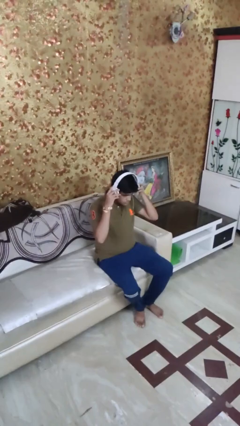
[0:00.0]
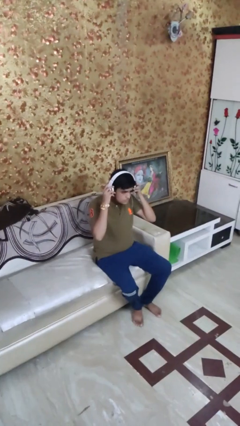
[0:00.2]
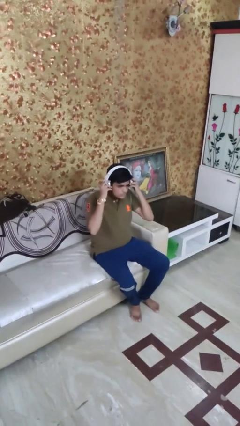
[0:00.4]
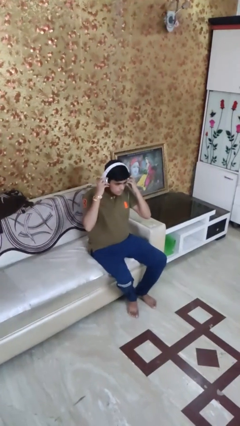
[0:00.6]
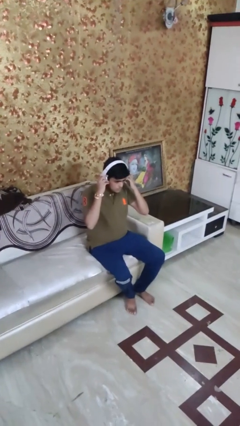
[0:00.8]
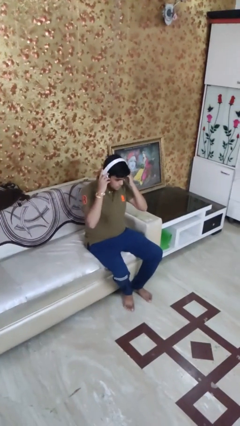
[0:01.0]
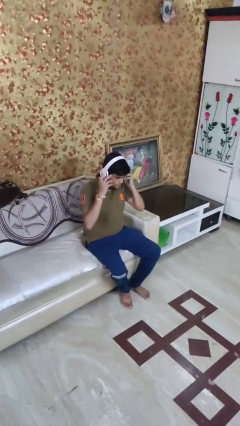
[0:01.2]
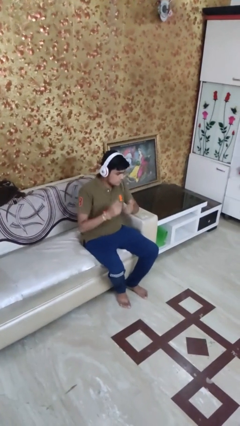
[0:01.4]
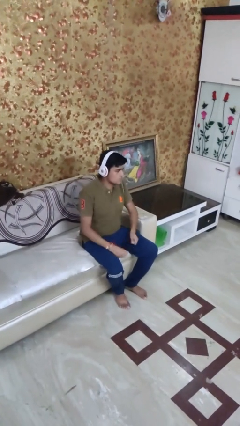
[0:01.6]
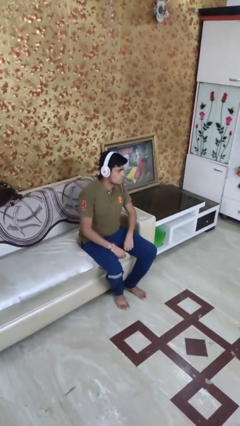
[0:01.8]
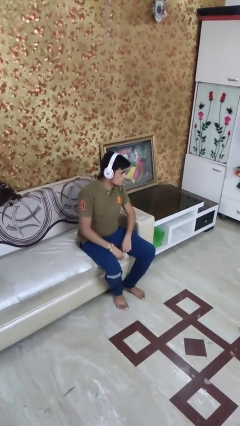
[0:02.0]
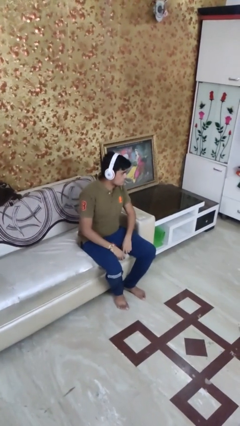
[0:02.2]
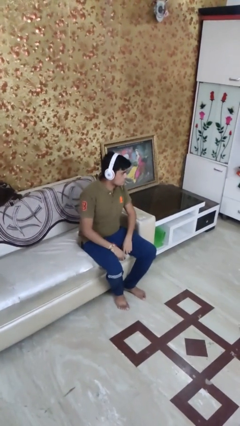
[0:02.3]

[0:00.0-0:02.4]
person puts on headphones

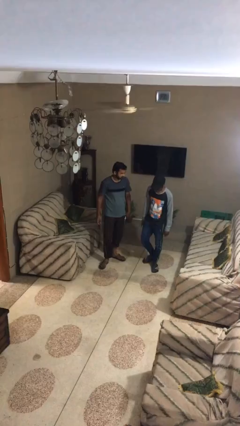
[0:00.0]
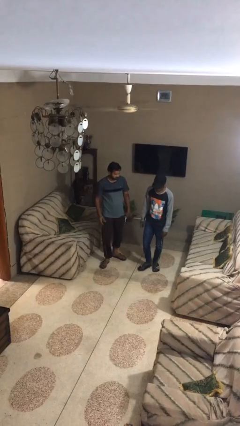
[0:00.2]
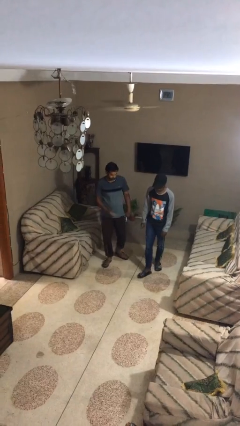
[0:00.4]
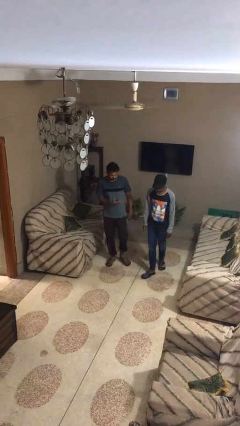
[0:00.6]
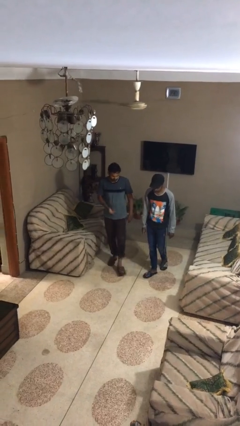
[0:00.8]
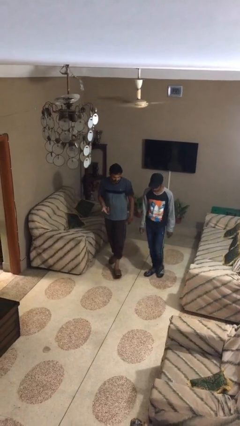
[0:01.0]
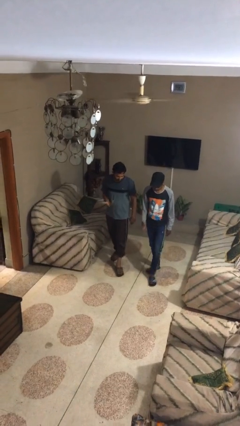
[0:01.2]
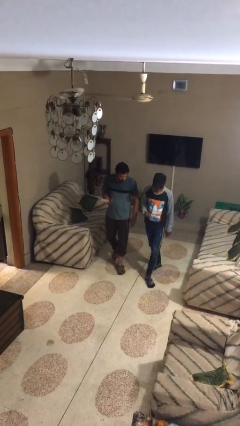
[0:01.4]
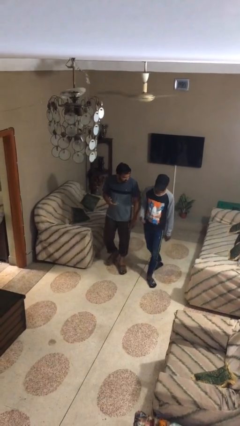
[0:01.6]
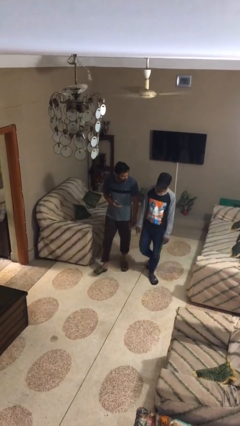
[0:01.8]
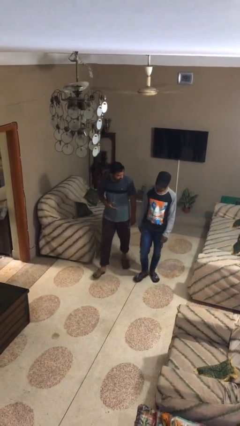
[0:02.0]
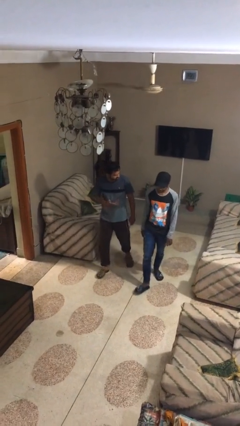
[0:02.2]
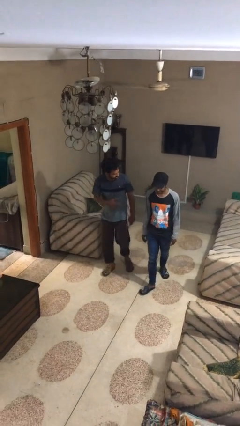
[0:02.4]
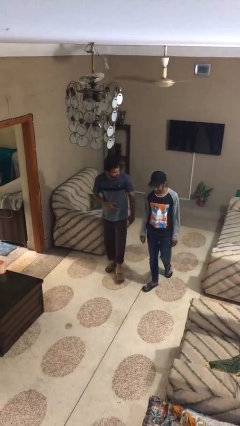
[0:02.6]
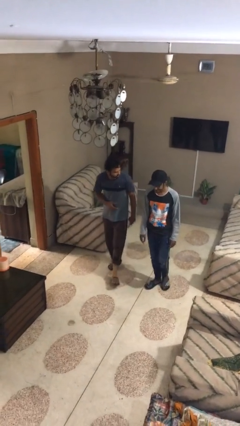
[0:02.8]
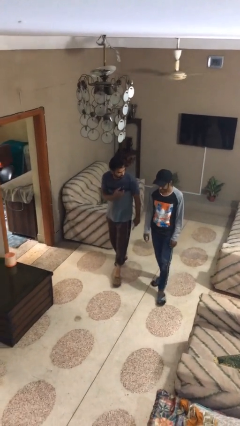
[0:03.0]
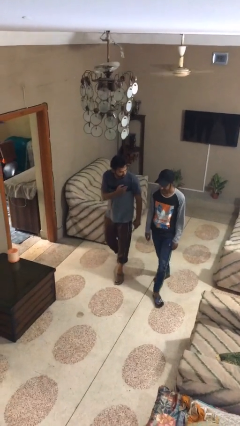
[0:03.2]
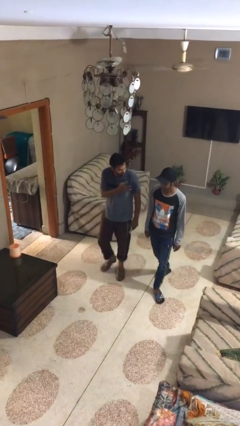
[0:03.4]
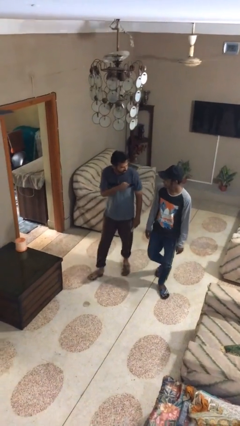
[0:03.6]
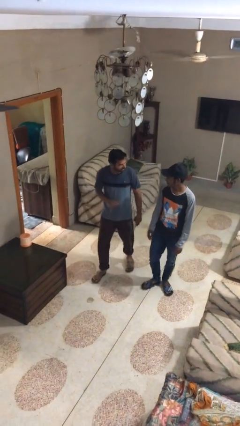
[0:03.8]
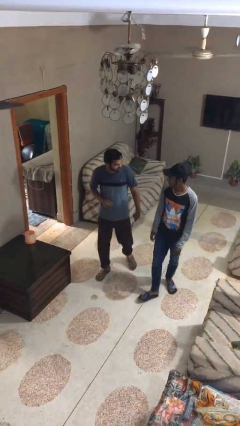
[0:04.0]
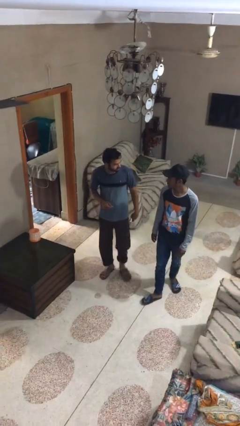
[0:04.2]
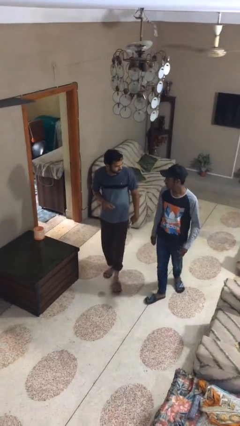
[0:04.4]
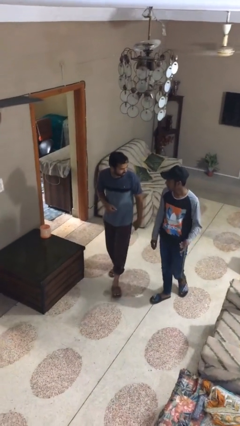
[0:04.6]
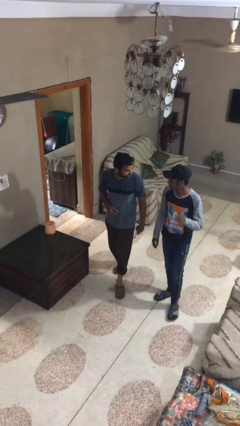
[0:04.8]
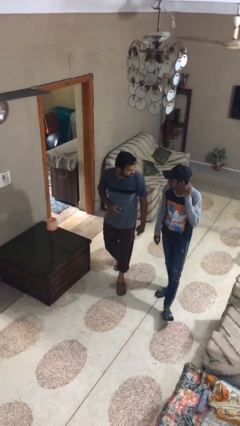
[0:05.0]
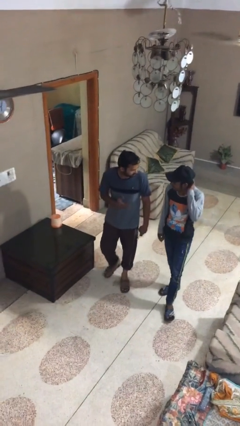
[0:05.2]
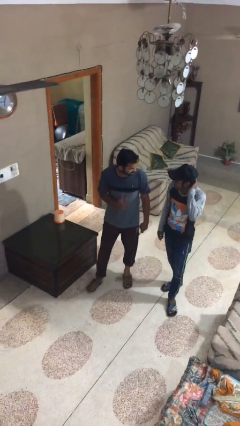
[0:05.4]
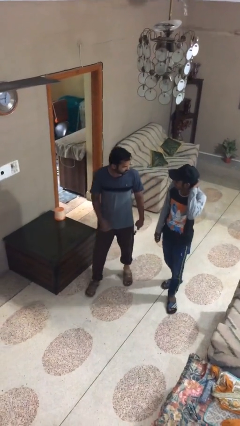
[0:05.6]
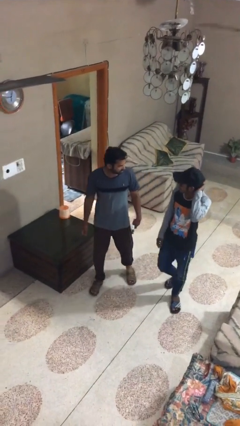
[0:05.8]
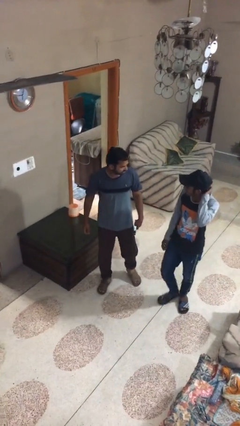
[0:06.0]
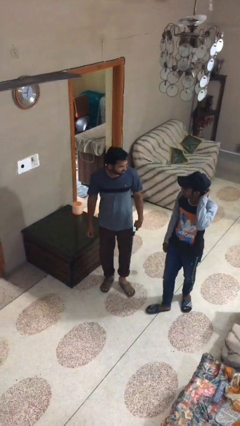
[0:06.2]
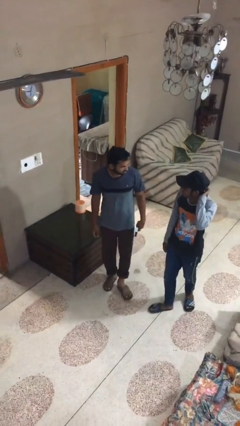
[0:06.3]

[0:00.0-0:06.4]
person talks to person

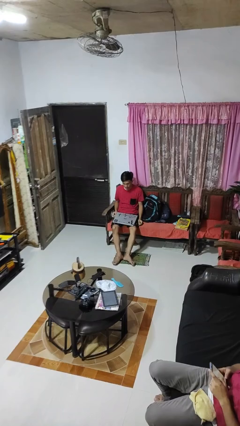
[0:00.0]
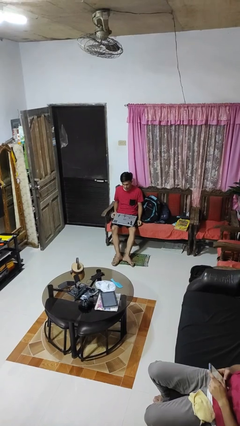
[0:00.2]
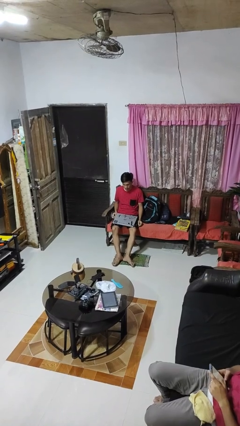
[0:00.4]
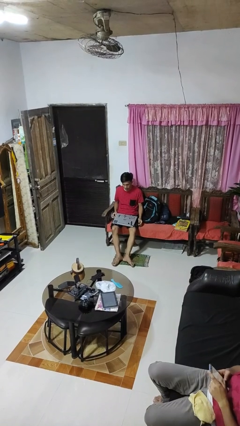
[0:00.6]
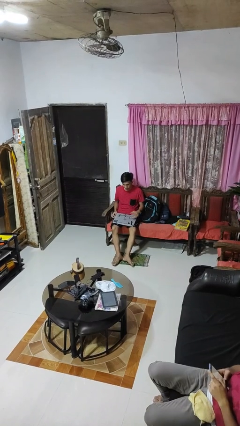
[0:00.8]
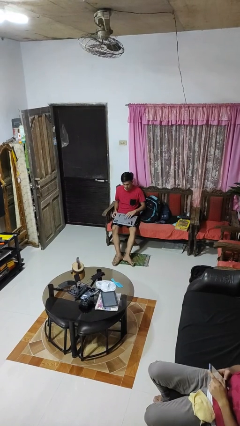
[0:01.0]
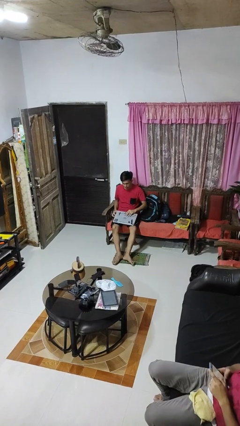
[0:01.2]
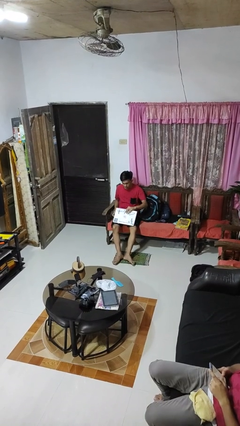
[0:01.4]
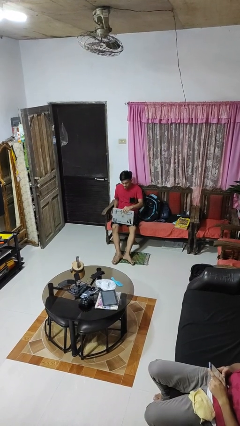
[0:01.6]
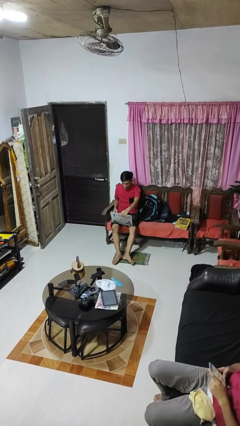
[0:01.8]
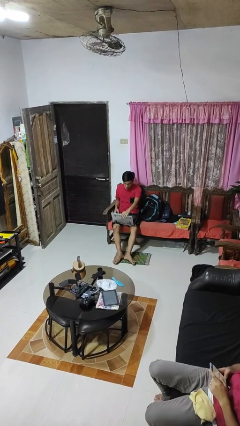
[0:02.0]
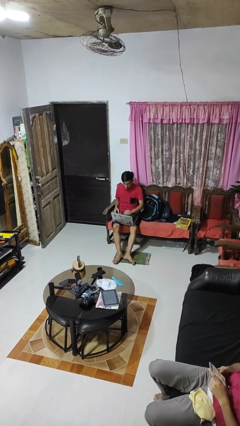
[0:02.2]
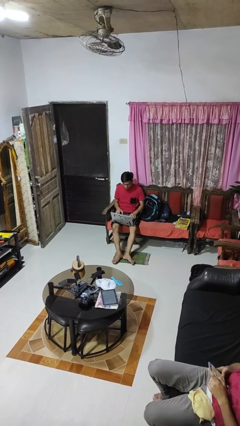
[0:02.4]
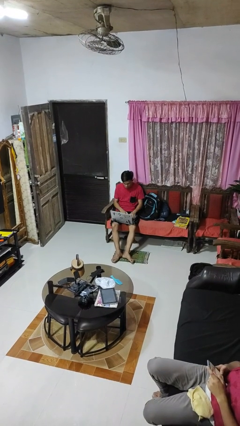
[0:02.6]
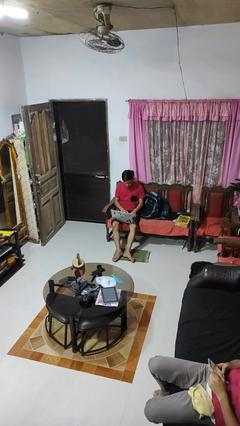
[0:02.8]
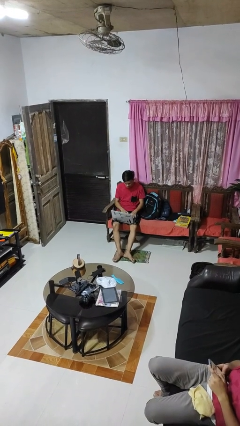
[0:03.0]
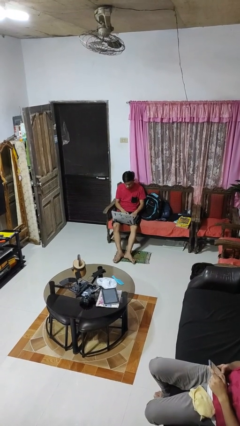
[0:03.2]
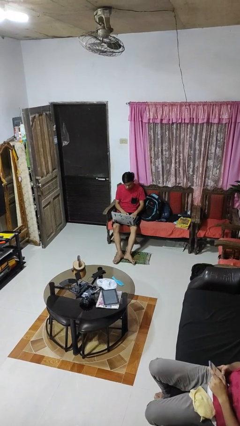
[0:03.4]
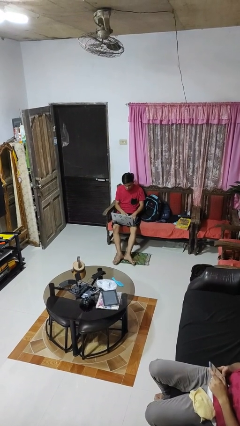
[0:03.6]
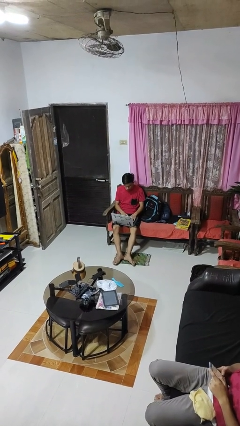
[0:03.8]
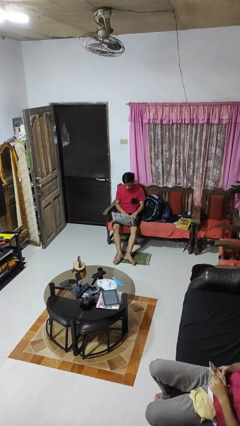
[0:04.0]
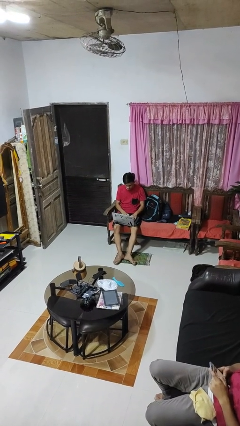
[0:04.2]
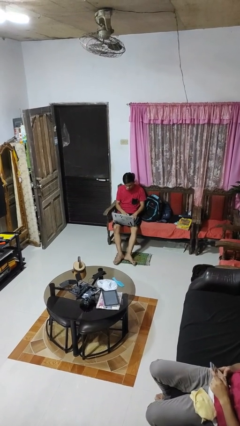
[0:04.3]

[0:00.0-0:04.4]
person opens laptop

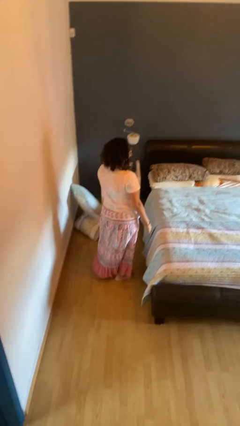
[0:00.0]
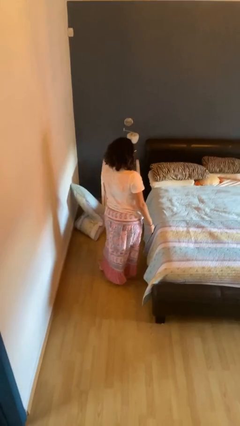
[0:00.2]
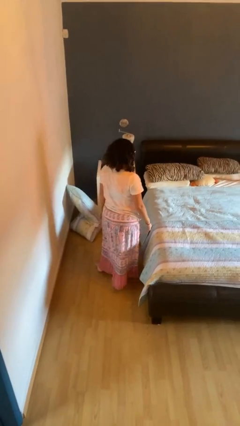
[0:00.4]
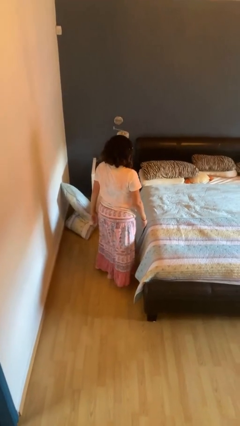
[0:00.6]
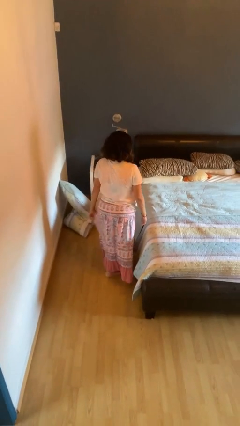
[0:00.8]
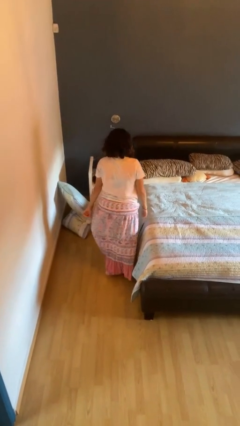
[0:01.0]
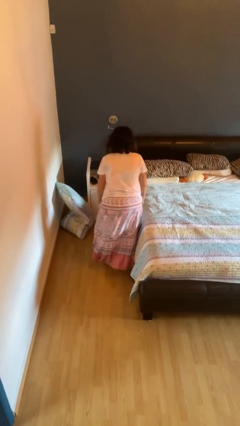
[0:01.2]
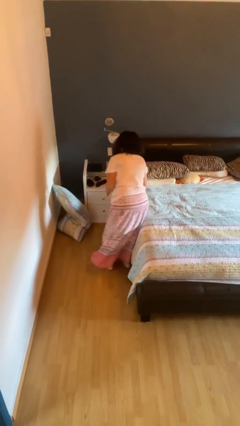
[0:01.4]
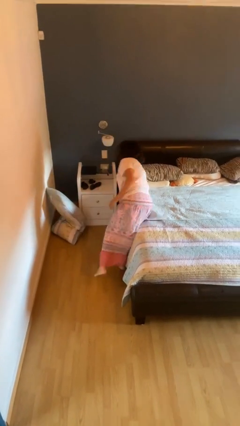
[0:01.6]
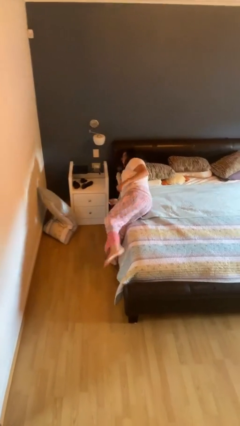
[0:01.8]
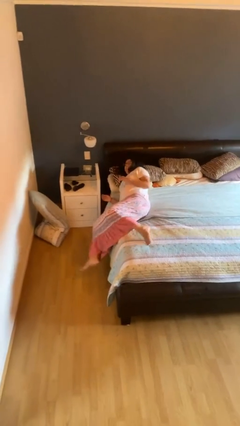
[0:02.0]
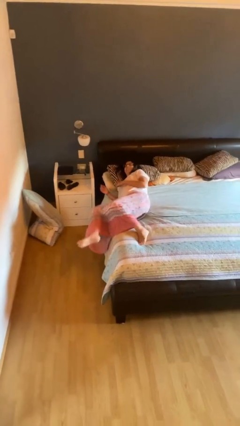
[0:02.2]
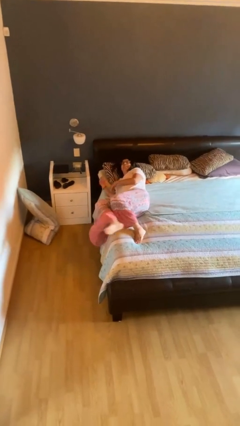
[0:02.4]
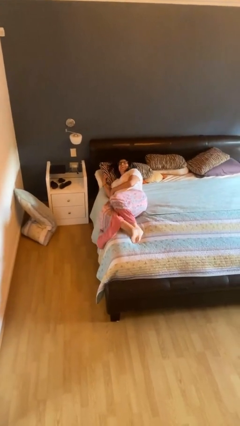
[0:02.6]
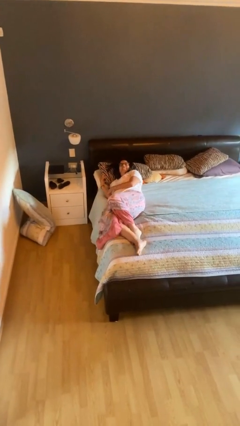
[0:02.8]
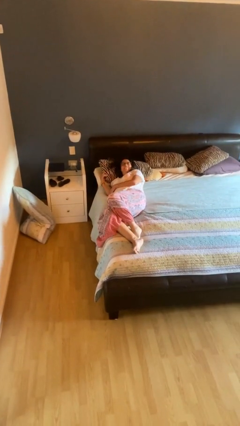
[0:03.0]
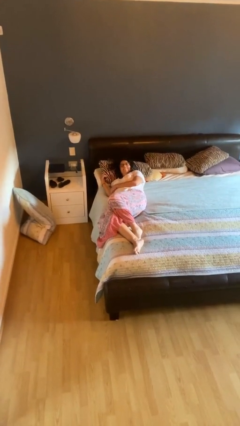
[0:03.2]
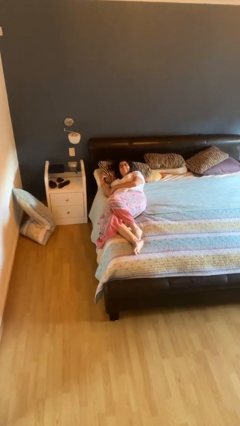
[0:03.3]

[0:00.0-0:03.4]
person lies down on bed

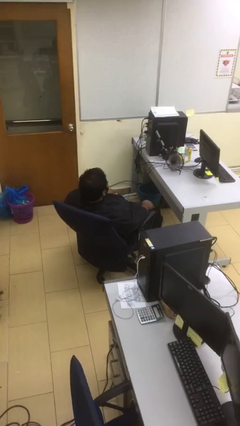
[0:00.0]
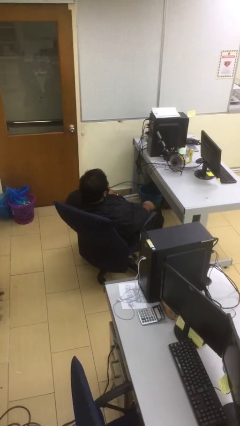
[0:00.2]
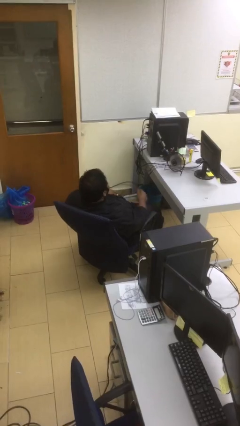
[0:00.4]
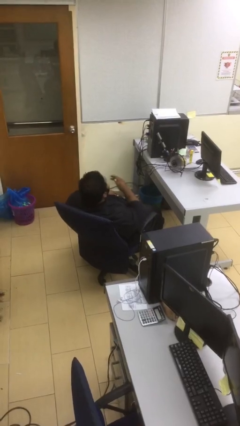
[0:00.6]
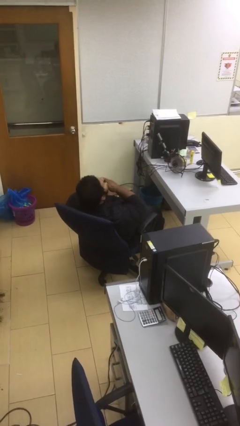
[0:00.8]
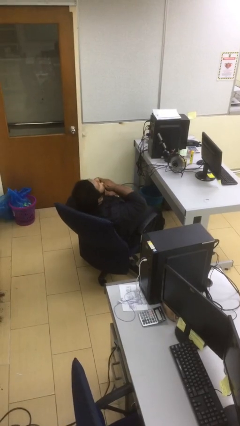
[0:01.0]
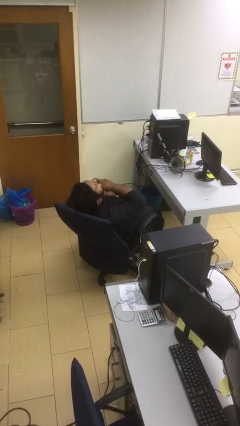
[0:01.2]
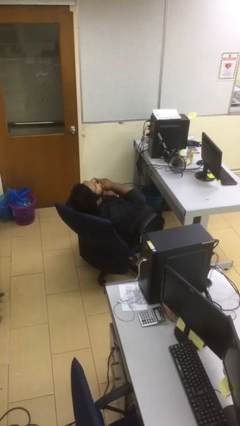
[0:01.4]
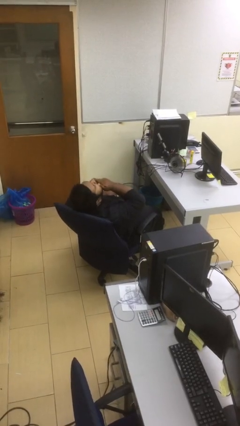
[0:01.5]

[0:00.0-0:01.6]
person yawns
